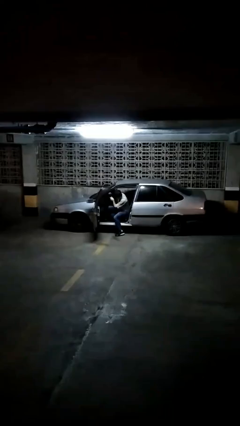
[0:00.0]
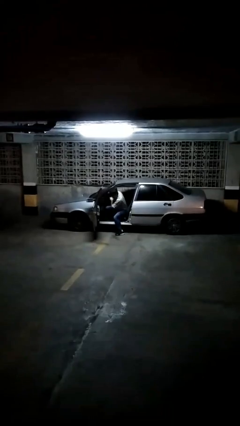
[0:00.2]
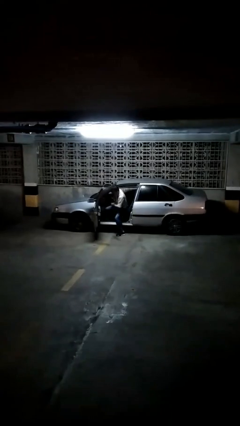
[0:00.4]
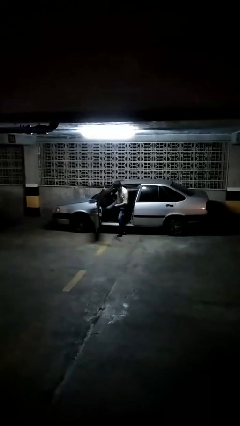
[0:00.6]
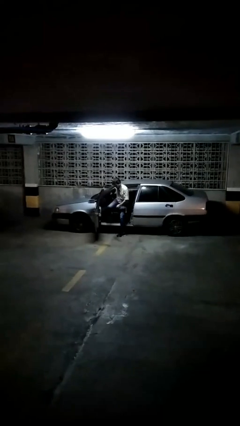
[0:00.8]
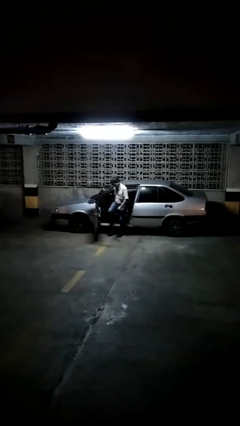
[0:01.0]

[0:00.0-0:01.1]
person exits car

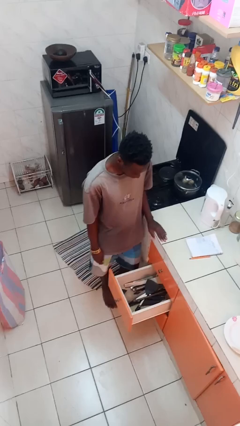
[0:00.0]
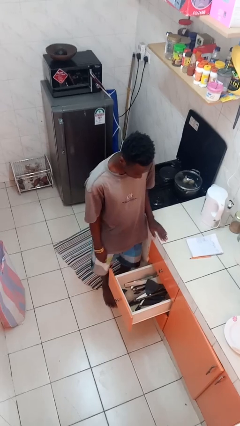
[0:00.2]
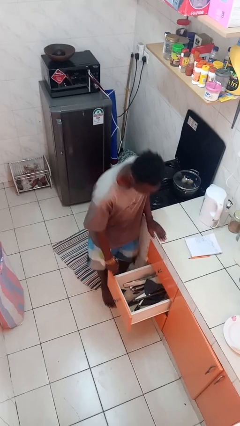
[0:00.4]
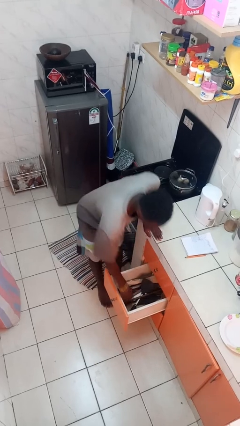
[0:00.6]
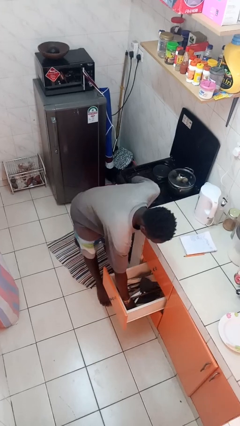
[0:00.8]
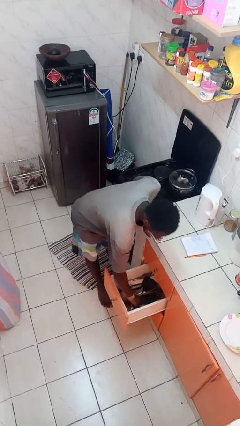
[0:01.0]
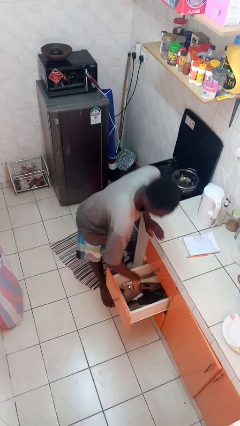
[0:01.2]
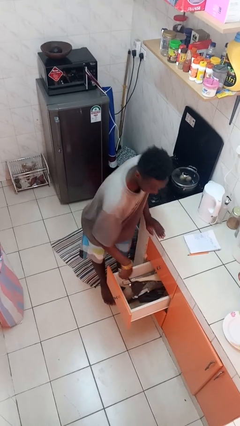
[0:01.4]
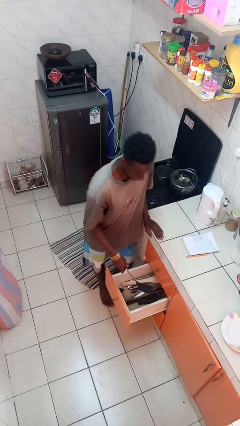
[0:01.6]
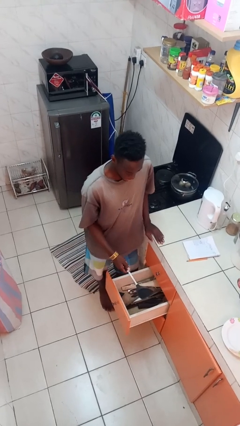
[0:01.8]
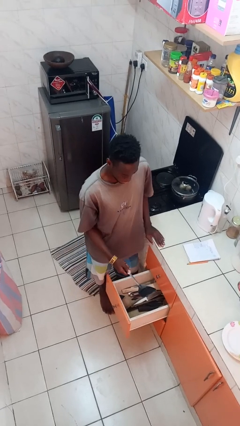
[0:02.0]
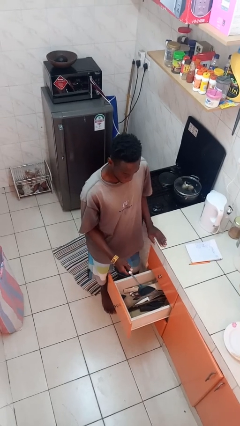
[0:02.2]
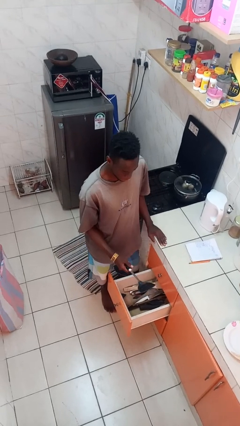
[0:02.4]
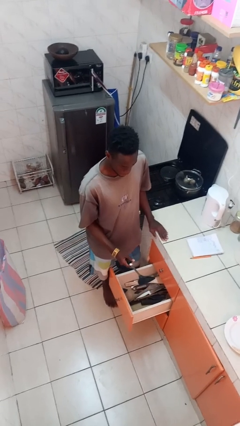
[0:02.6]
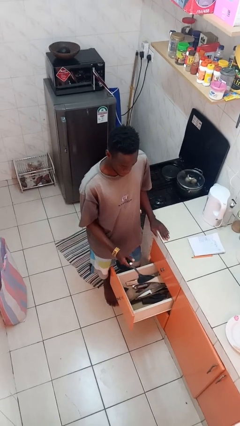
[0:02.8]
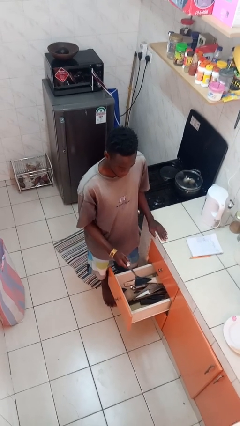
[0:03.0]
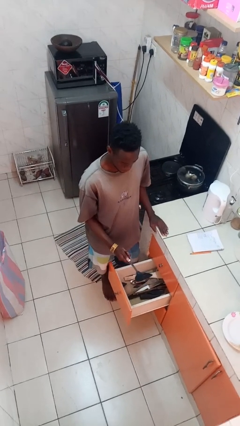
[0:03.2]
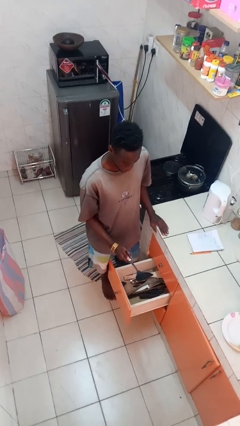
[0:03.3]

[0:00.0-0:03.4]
person takes object from kitchen drawer

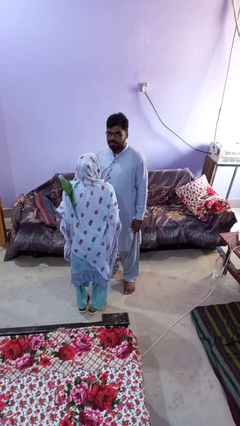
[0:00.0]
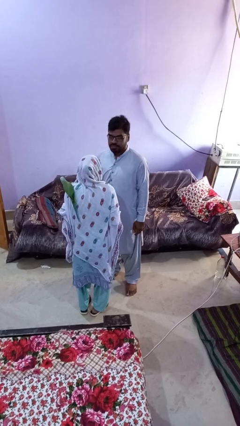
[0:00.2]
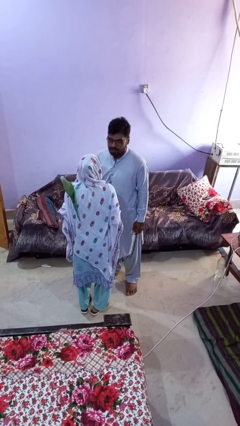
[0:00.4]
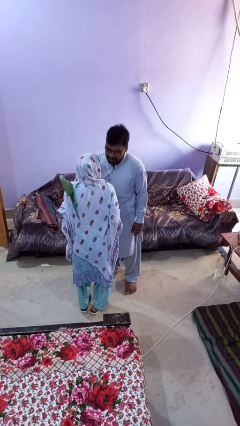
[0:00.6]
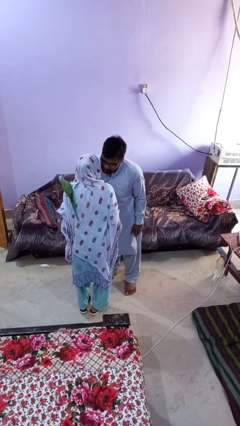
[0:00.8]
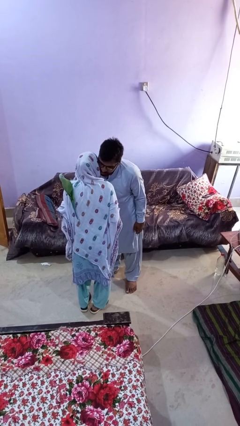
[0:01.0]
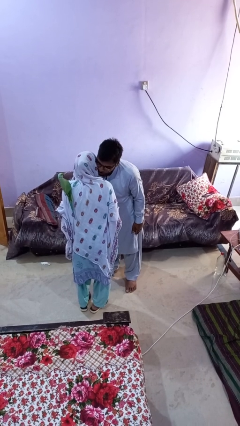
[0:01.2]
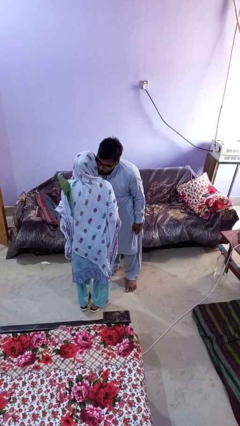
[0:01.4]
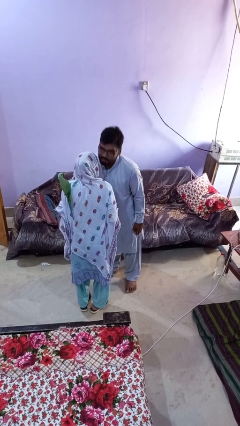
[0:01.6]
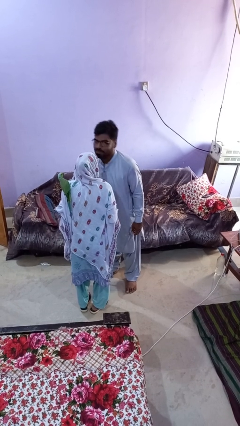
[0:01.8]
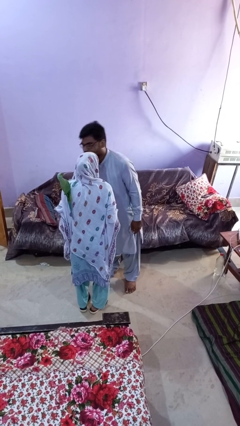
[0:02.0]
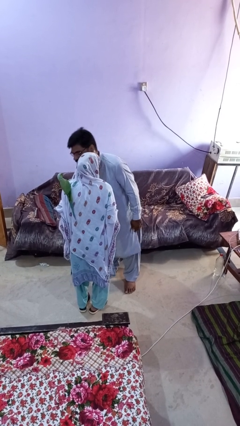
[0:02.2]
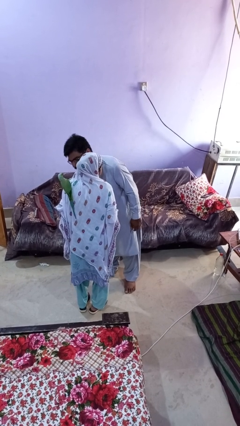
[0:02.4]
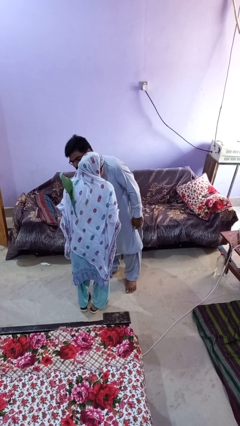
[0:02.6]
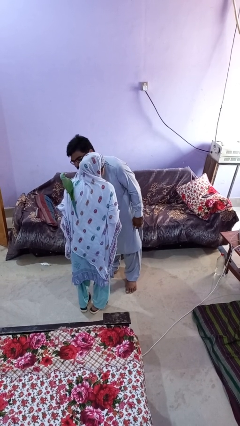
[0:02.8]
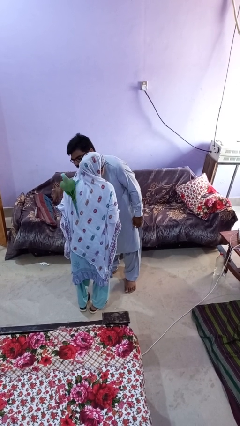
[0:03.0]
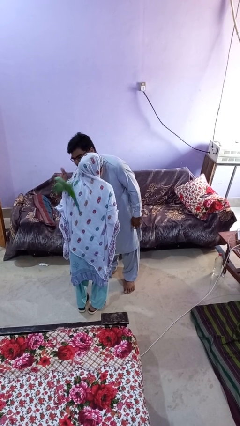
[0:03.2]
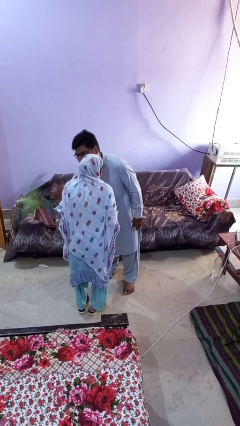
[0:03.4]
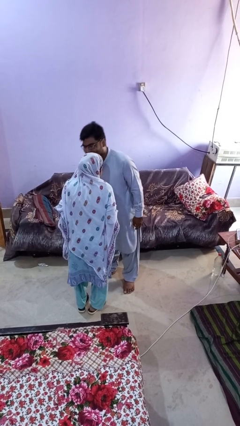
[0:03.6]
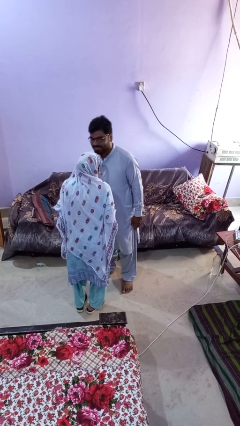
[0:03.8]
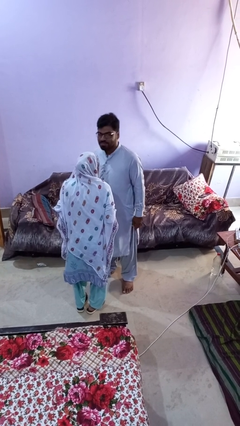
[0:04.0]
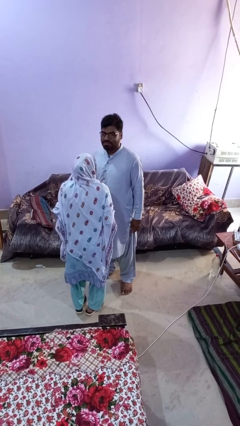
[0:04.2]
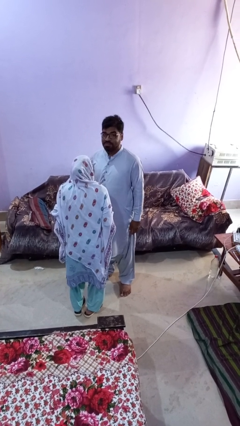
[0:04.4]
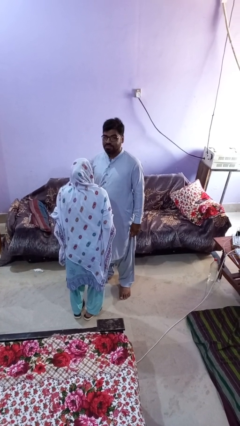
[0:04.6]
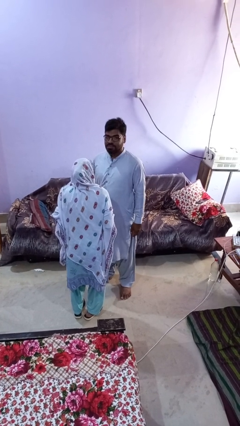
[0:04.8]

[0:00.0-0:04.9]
person kisses cheek of person

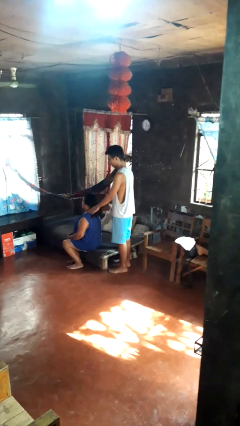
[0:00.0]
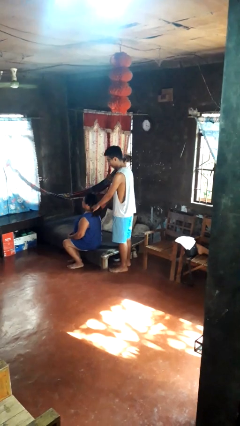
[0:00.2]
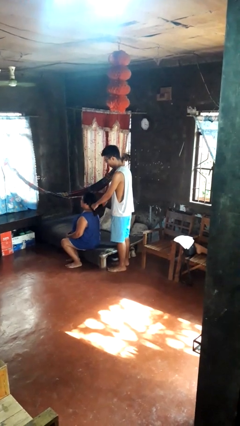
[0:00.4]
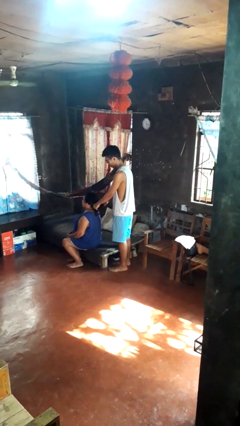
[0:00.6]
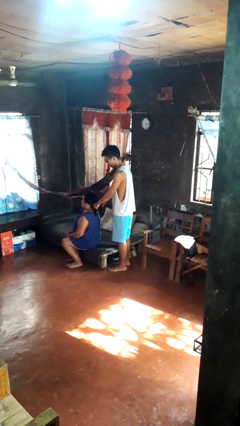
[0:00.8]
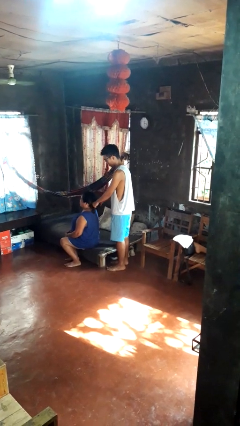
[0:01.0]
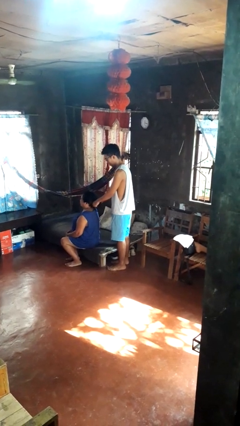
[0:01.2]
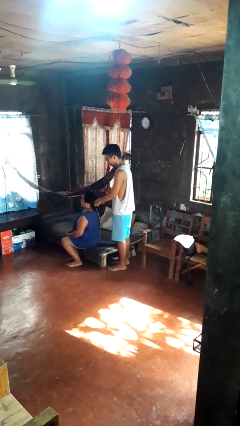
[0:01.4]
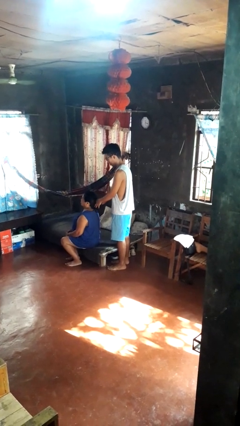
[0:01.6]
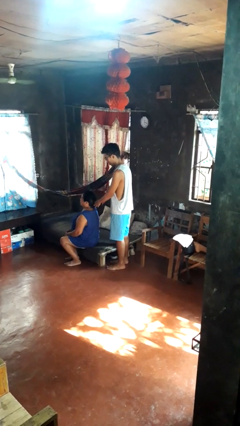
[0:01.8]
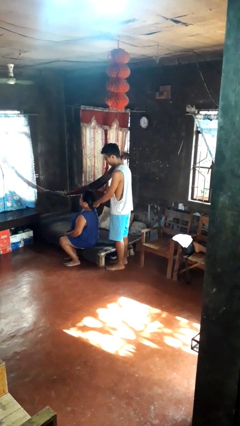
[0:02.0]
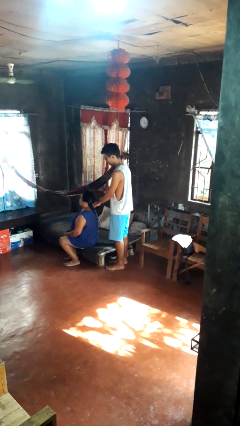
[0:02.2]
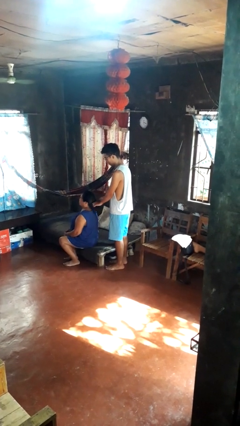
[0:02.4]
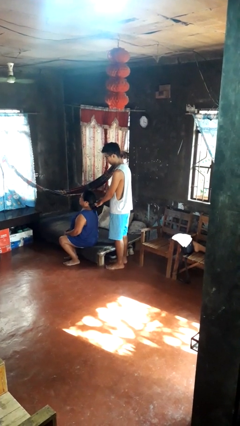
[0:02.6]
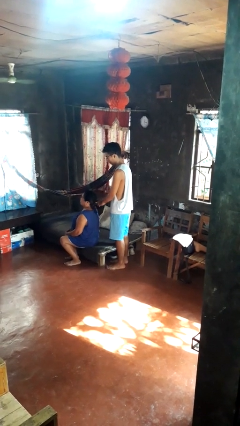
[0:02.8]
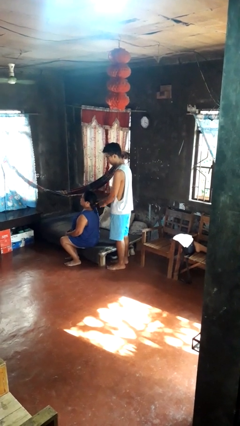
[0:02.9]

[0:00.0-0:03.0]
person braids hair of person

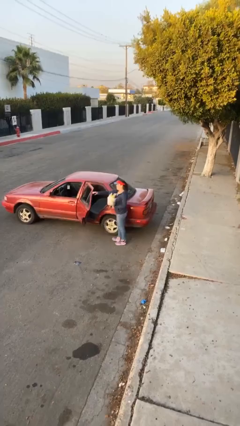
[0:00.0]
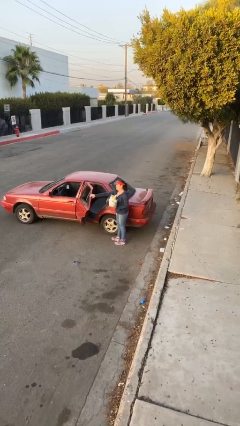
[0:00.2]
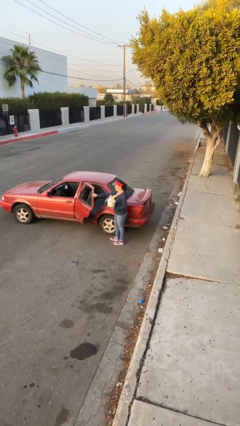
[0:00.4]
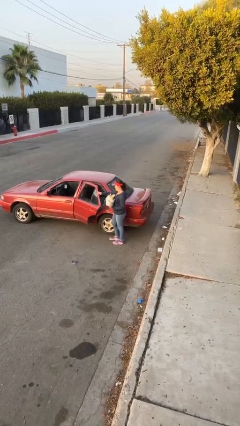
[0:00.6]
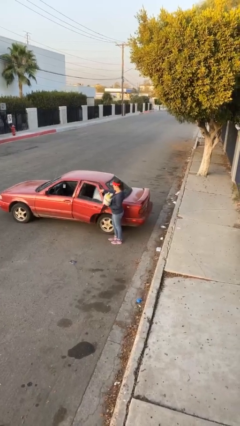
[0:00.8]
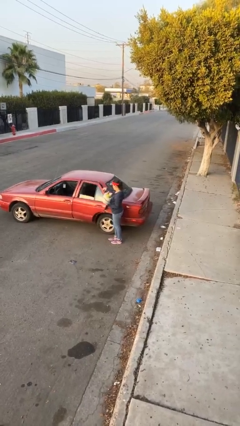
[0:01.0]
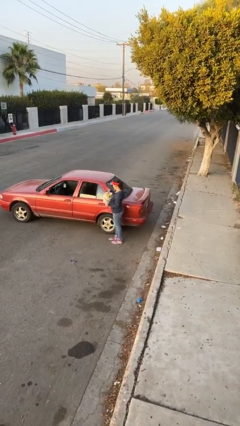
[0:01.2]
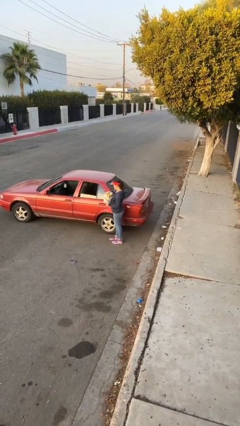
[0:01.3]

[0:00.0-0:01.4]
person closes car door

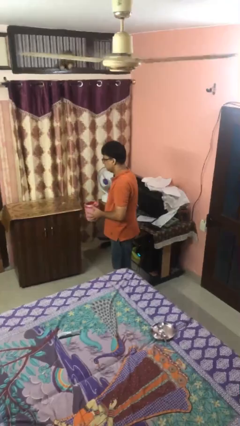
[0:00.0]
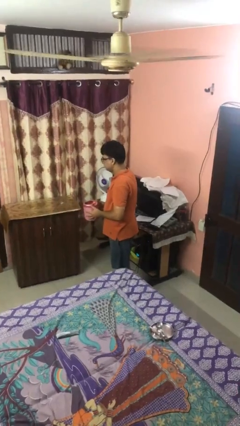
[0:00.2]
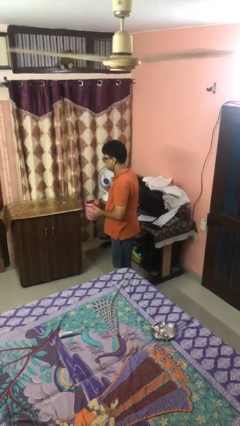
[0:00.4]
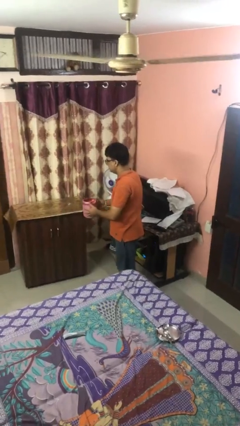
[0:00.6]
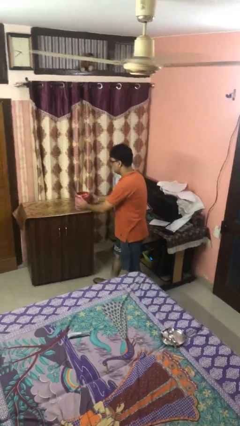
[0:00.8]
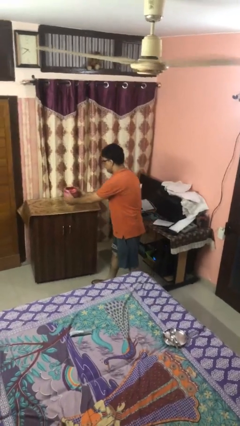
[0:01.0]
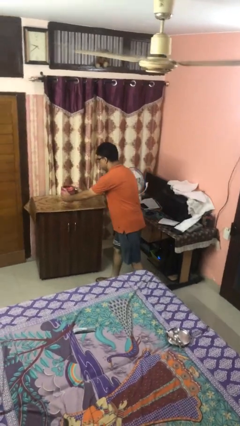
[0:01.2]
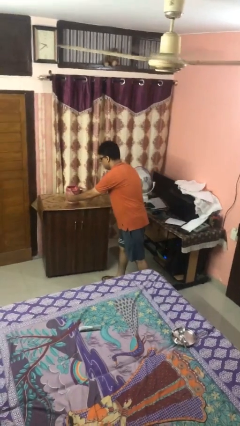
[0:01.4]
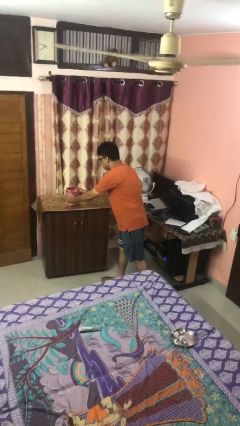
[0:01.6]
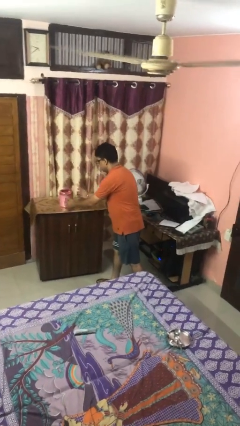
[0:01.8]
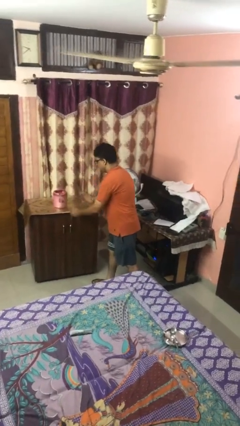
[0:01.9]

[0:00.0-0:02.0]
person puts down object on countertop

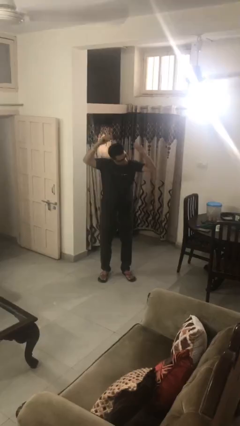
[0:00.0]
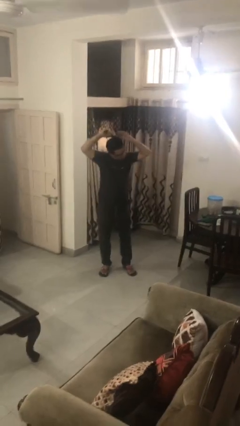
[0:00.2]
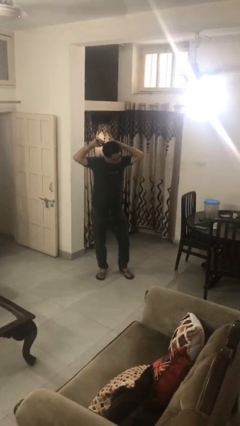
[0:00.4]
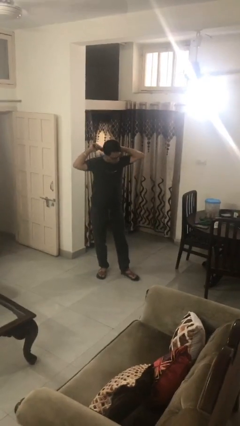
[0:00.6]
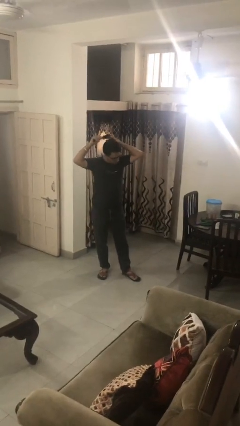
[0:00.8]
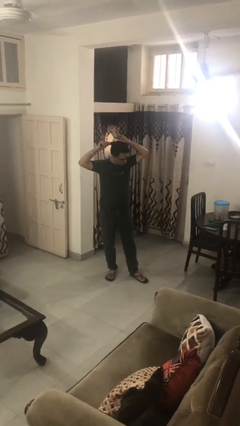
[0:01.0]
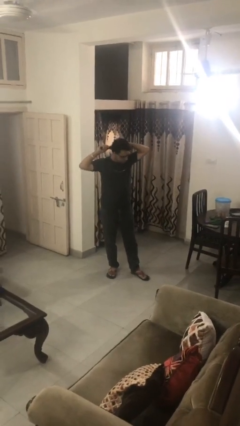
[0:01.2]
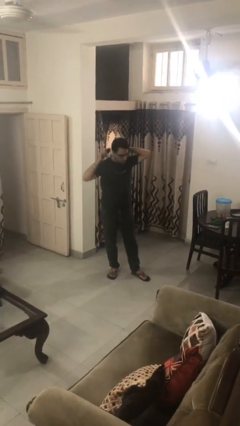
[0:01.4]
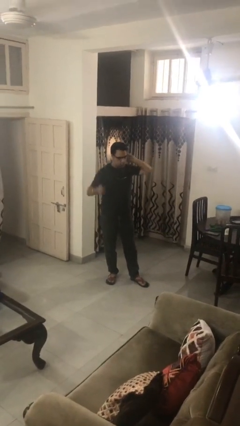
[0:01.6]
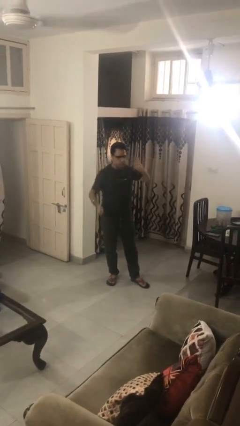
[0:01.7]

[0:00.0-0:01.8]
person brushes hair
